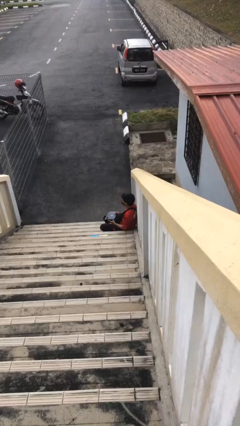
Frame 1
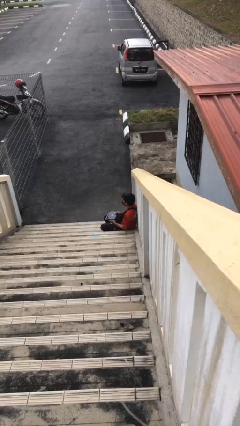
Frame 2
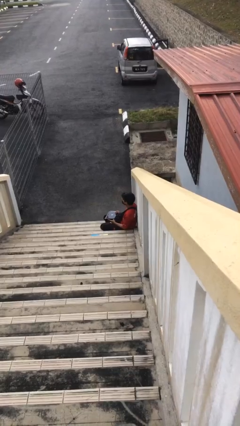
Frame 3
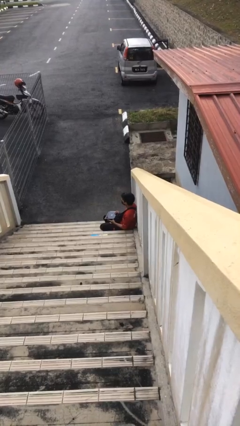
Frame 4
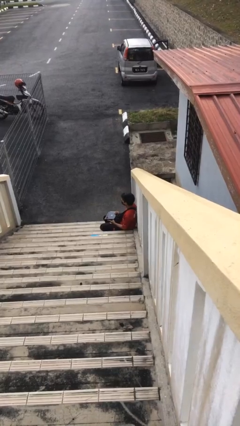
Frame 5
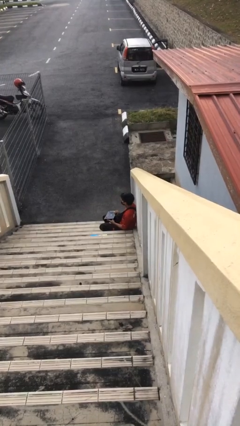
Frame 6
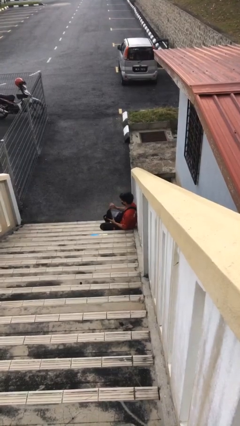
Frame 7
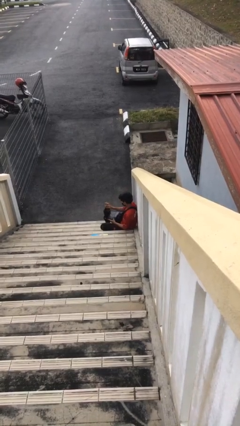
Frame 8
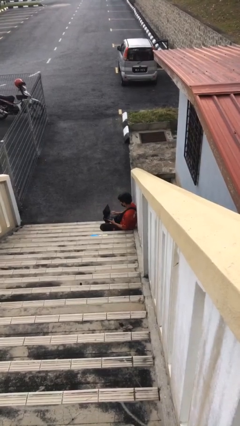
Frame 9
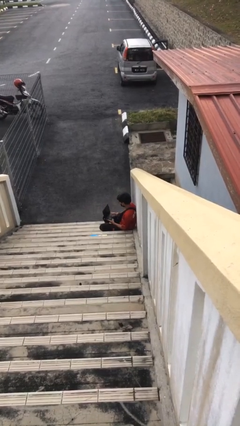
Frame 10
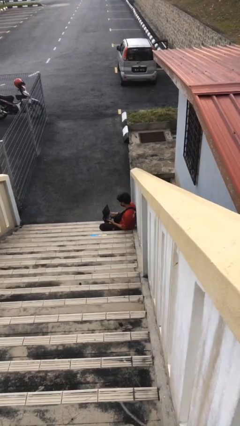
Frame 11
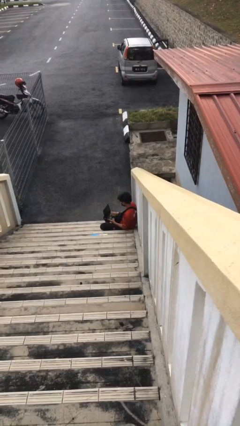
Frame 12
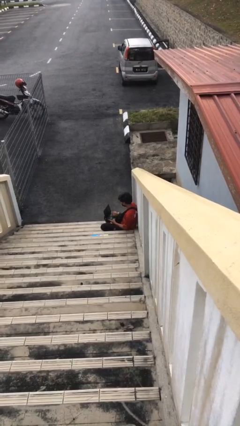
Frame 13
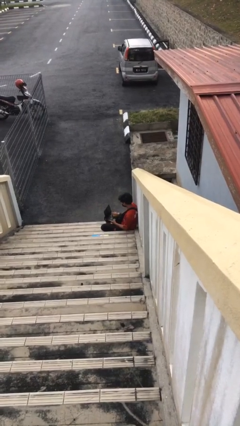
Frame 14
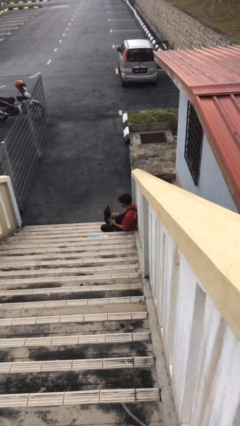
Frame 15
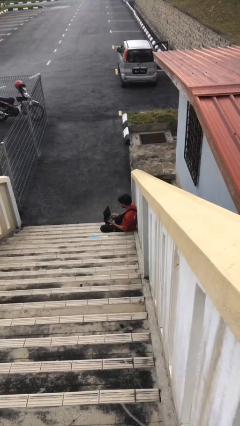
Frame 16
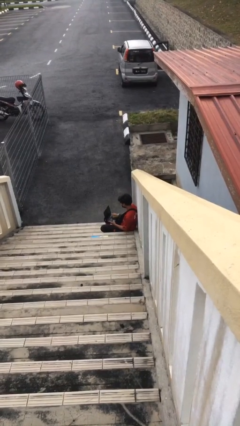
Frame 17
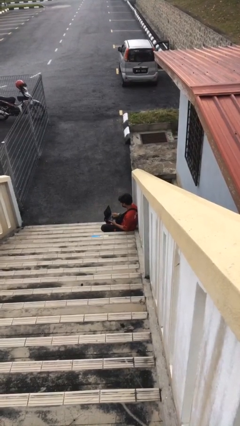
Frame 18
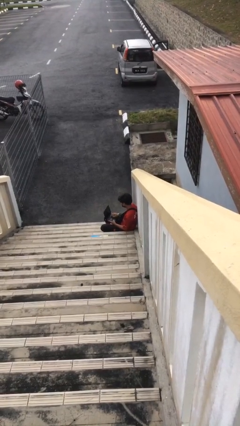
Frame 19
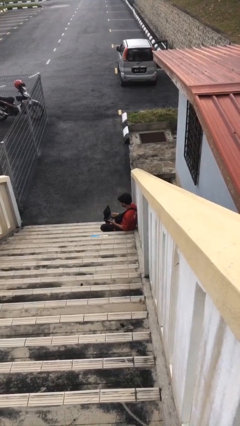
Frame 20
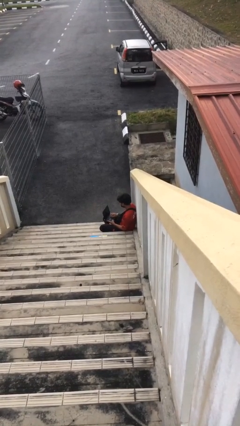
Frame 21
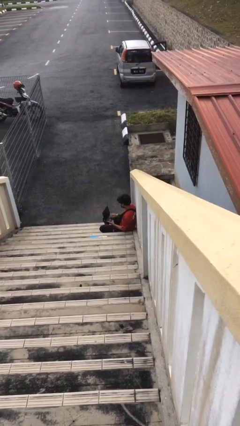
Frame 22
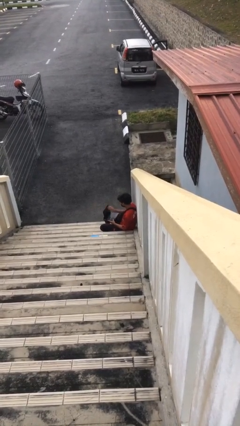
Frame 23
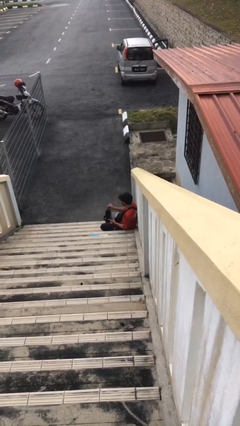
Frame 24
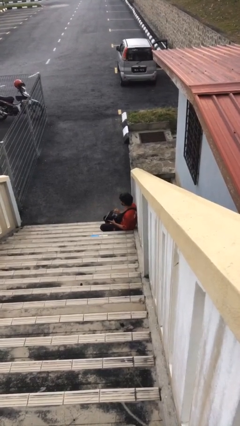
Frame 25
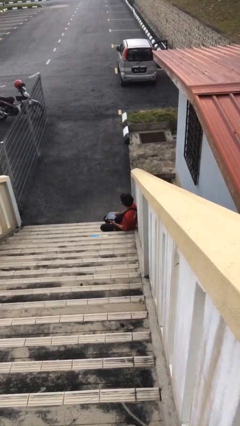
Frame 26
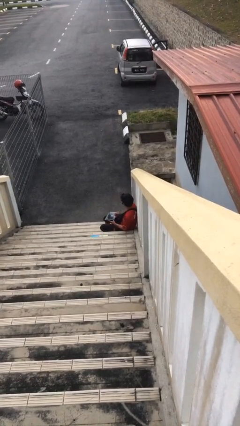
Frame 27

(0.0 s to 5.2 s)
person interacts with laptop

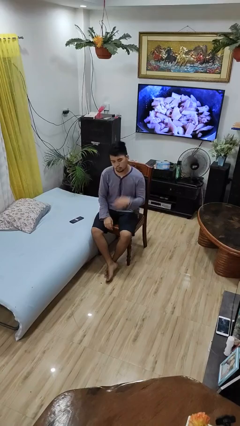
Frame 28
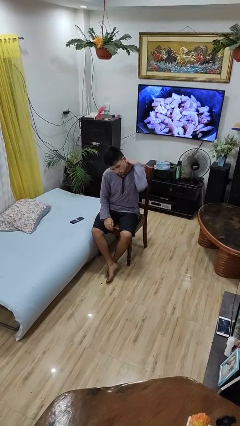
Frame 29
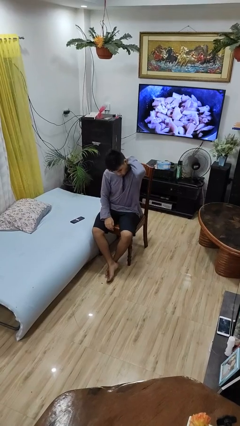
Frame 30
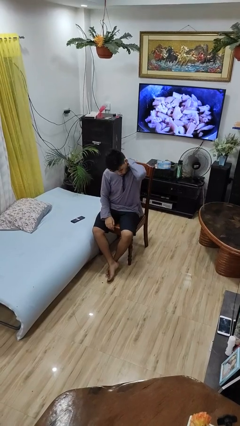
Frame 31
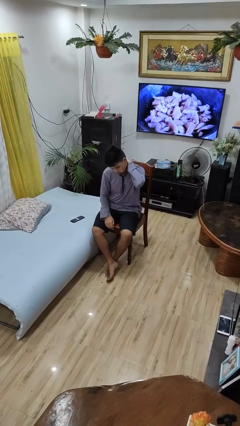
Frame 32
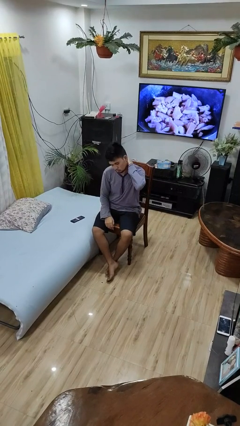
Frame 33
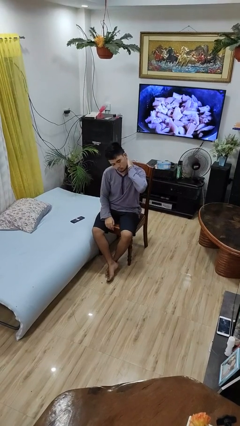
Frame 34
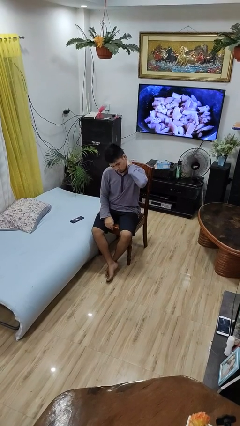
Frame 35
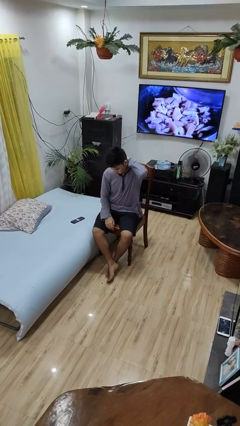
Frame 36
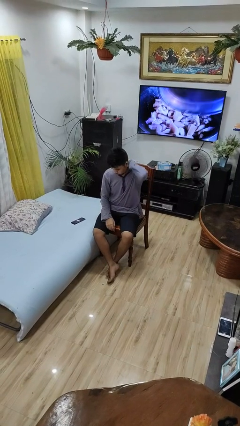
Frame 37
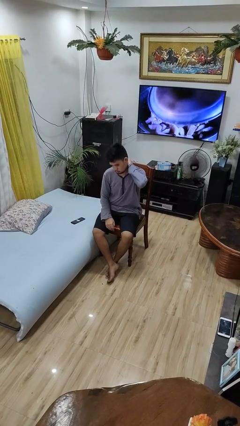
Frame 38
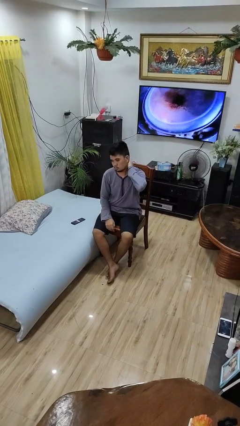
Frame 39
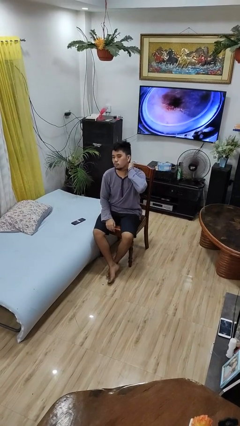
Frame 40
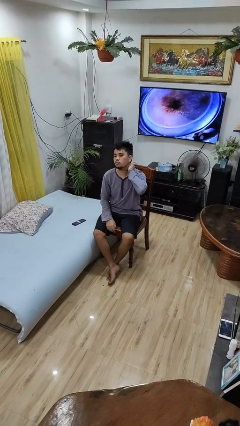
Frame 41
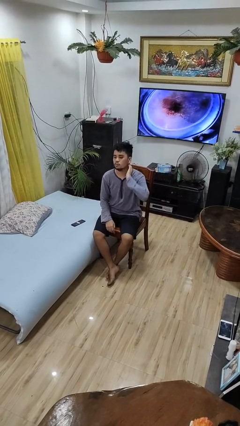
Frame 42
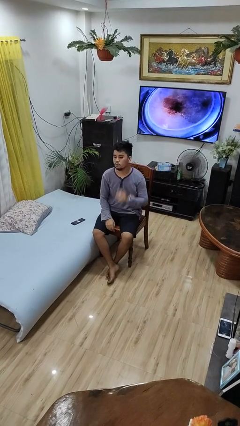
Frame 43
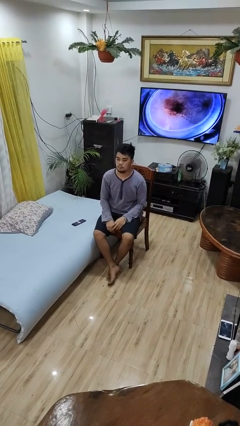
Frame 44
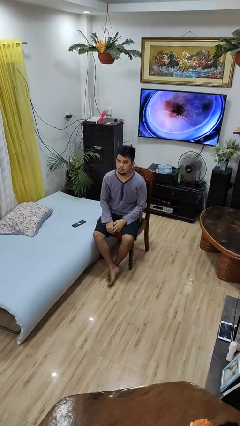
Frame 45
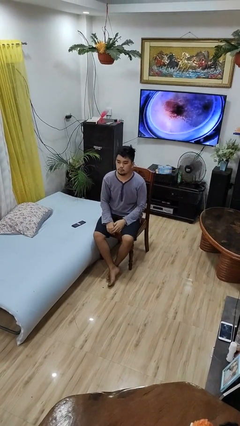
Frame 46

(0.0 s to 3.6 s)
person rubs neck

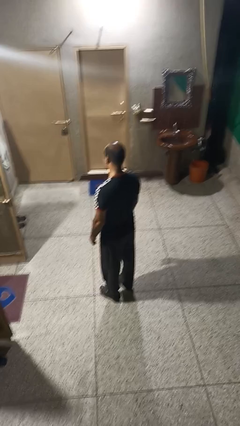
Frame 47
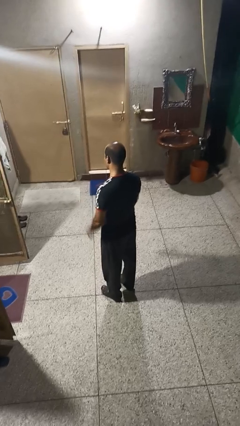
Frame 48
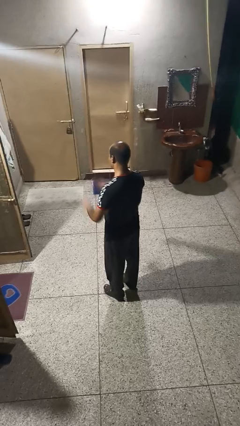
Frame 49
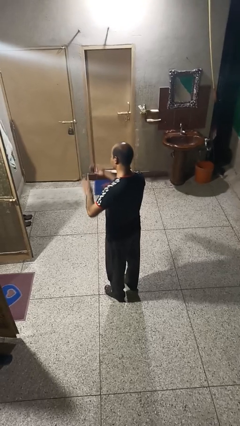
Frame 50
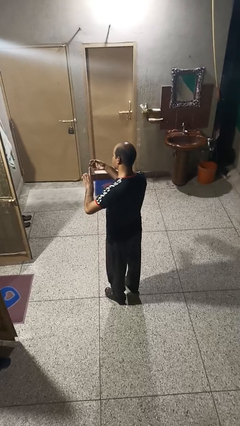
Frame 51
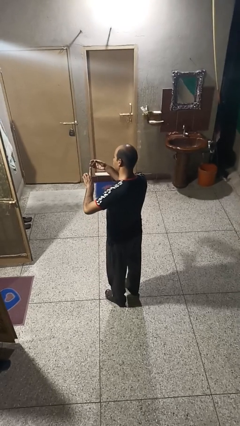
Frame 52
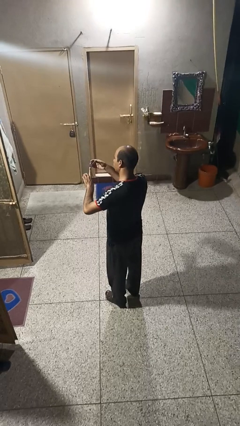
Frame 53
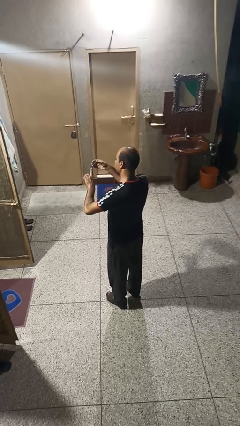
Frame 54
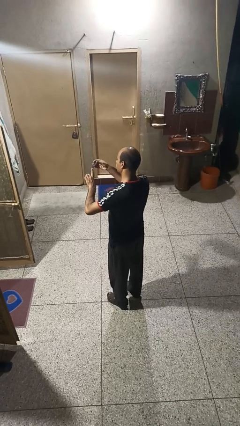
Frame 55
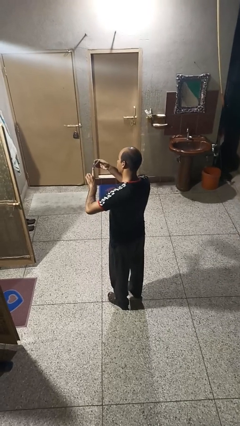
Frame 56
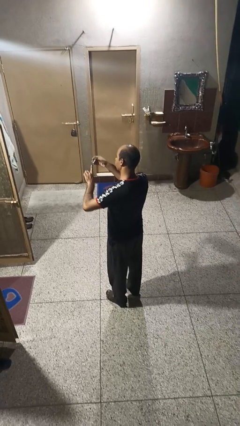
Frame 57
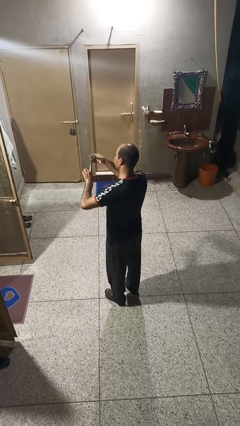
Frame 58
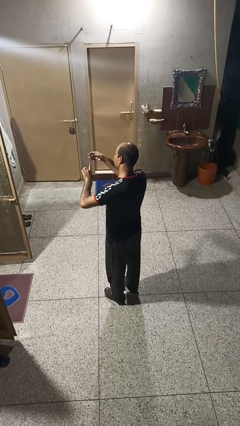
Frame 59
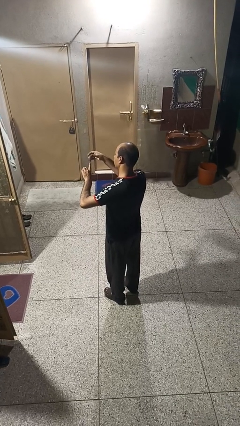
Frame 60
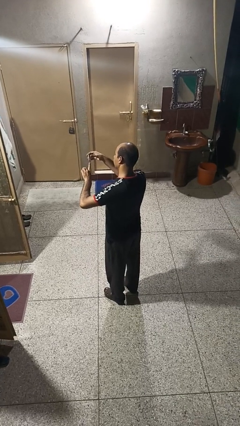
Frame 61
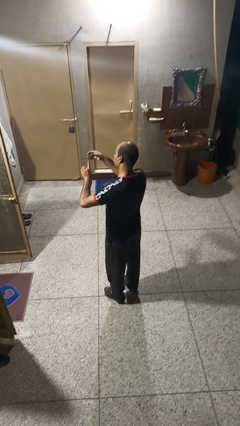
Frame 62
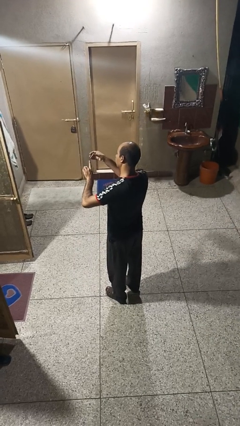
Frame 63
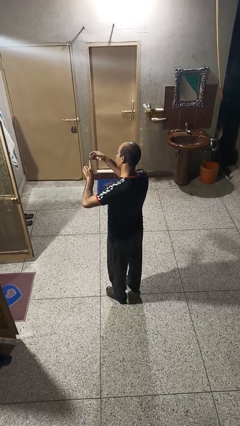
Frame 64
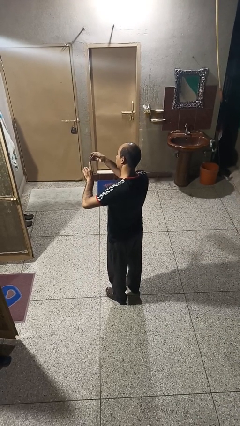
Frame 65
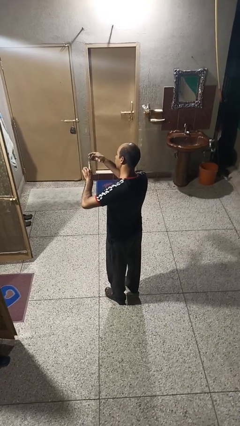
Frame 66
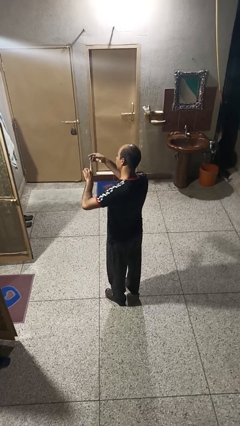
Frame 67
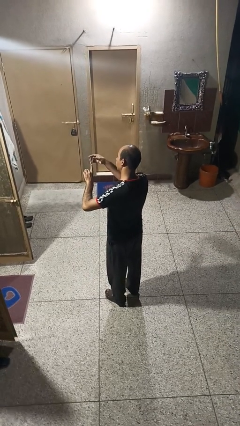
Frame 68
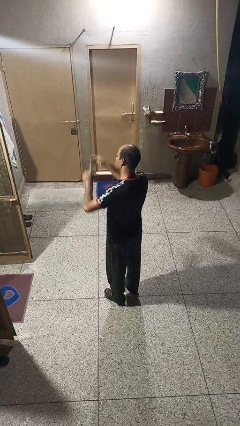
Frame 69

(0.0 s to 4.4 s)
person clips fingernails

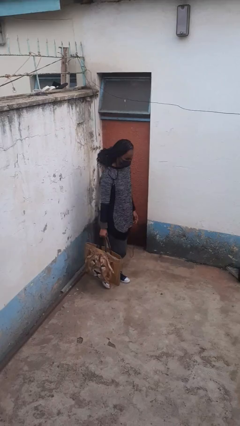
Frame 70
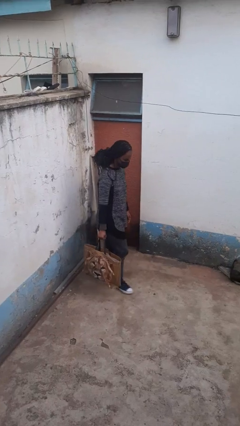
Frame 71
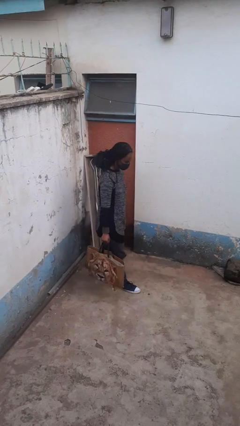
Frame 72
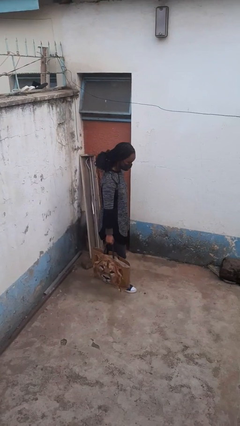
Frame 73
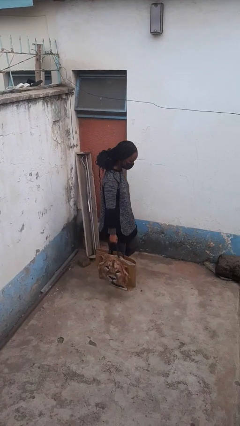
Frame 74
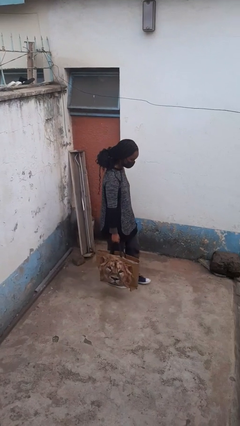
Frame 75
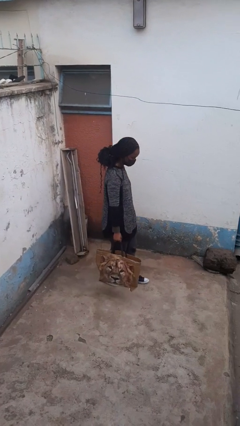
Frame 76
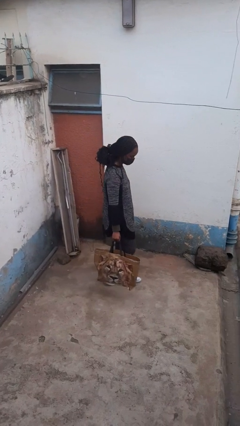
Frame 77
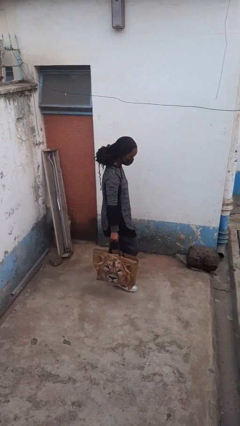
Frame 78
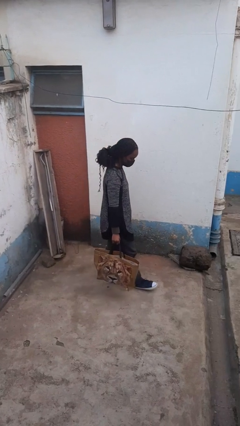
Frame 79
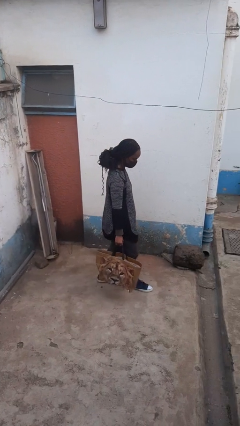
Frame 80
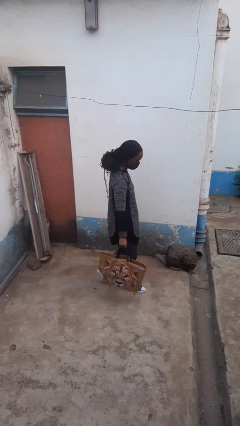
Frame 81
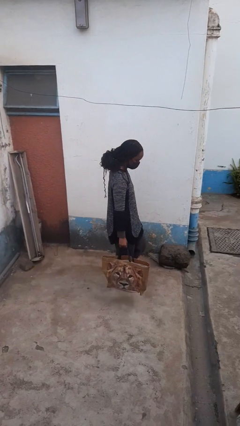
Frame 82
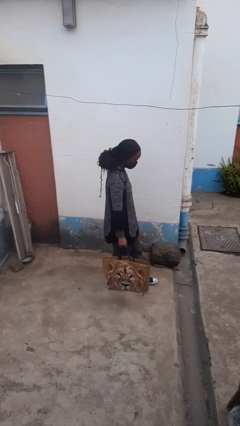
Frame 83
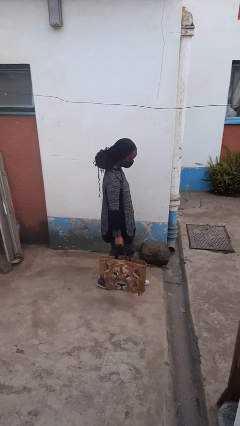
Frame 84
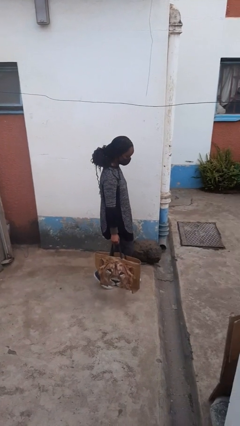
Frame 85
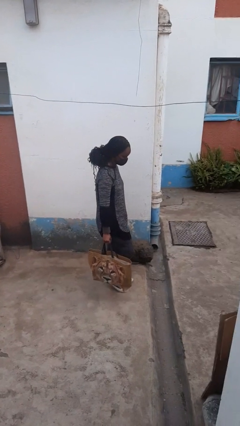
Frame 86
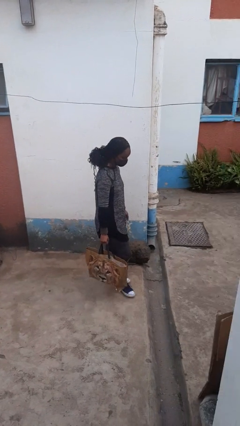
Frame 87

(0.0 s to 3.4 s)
person carries groceries

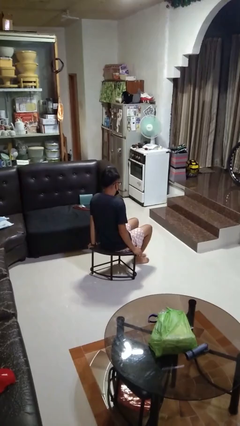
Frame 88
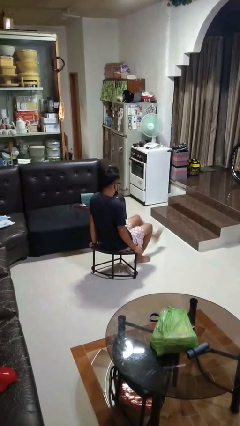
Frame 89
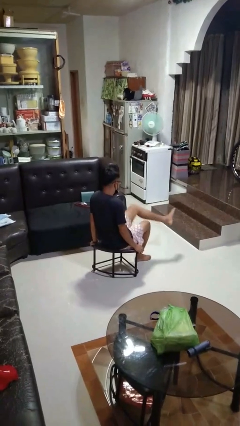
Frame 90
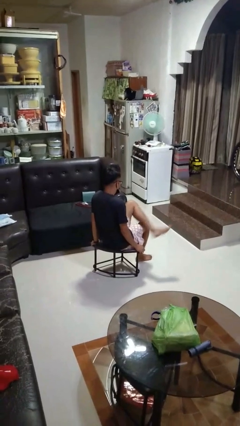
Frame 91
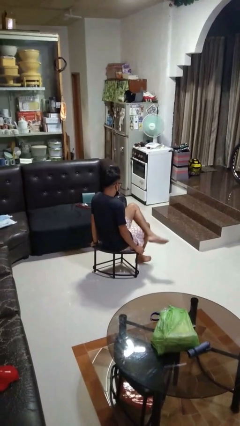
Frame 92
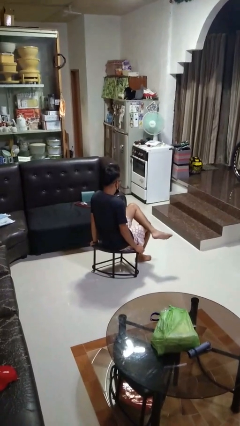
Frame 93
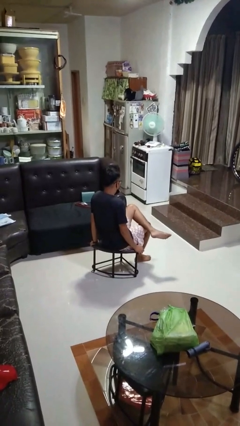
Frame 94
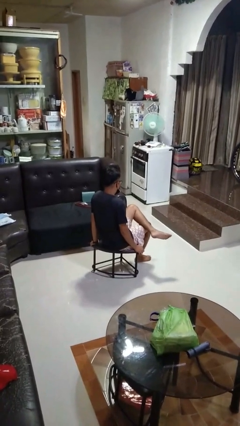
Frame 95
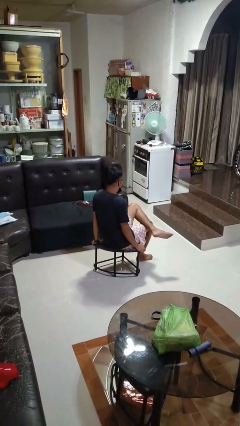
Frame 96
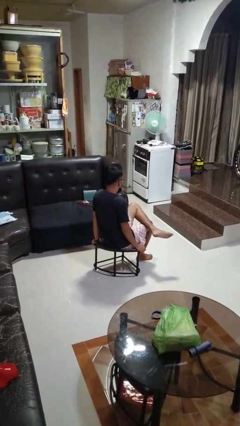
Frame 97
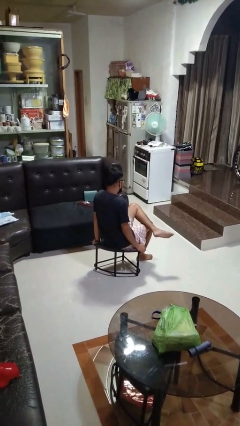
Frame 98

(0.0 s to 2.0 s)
person crosses legs
